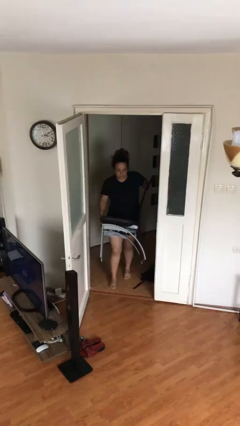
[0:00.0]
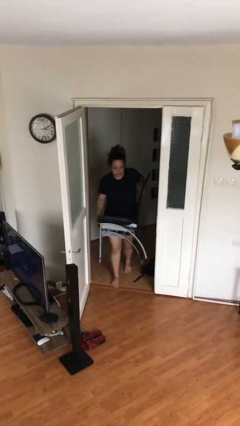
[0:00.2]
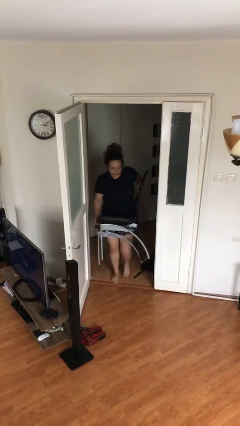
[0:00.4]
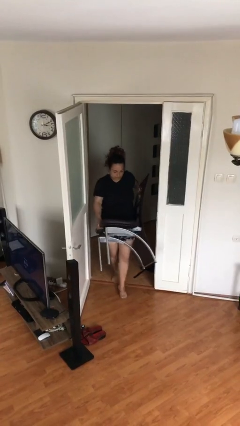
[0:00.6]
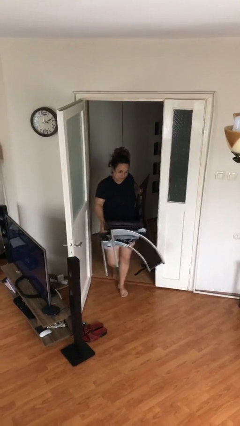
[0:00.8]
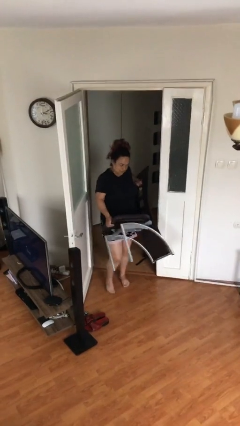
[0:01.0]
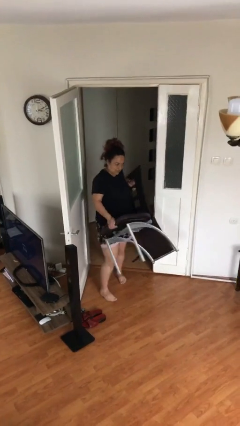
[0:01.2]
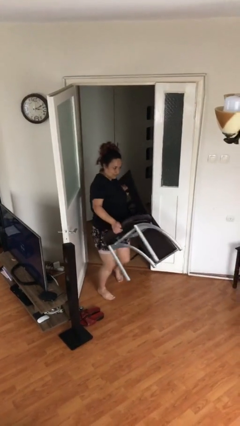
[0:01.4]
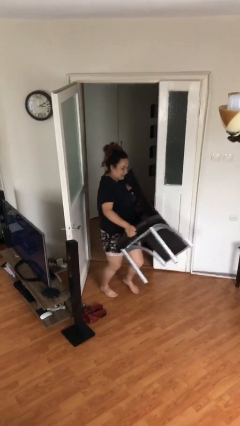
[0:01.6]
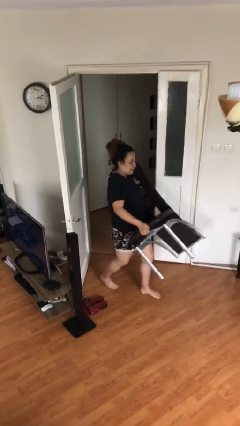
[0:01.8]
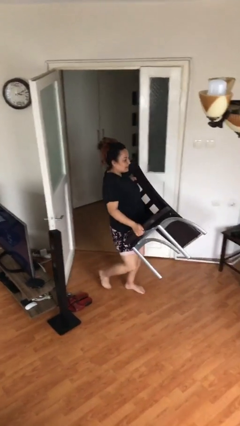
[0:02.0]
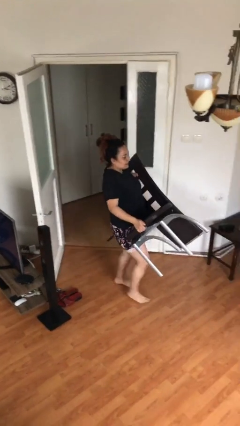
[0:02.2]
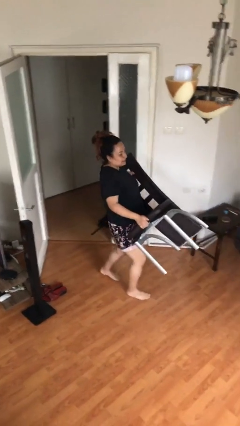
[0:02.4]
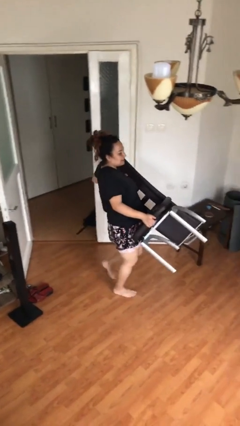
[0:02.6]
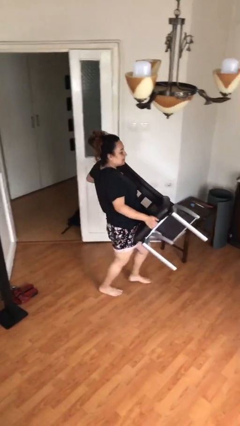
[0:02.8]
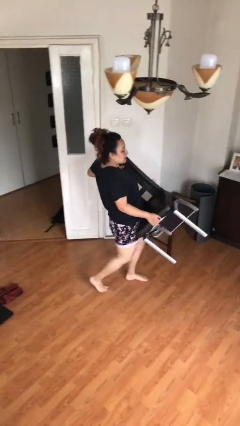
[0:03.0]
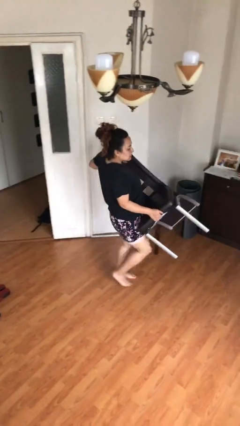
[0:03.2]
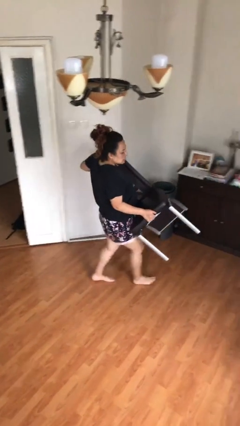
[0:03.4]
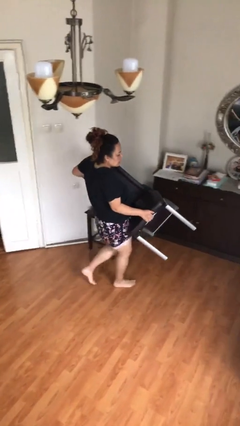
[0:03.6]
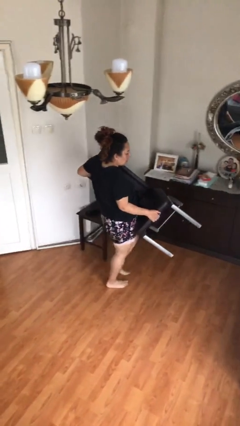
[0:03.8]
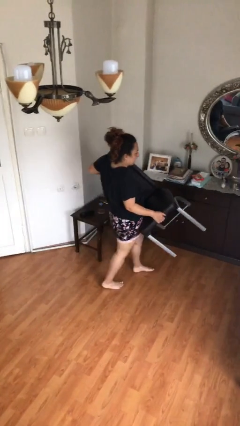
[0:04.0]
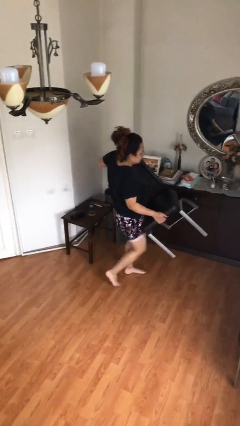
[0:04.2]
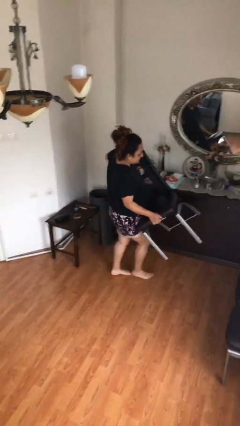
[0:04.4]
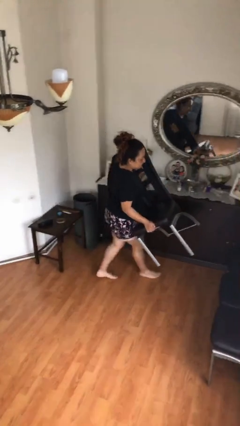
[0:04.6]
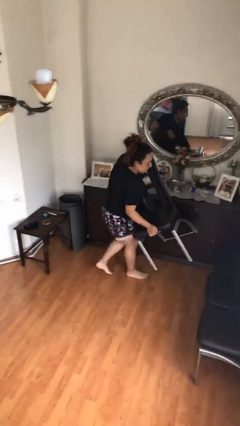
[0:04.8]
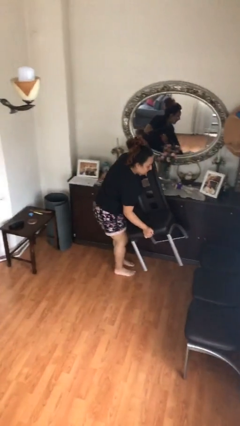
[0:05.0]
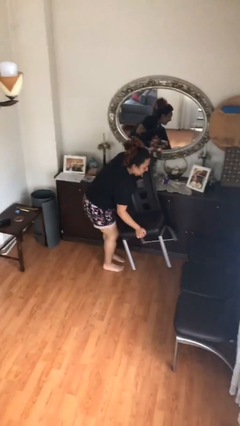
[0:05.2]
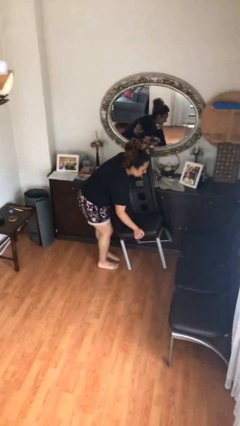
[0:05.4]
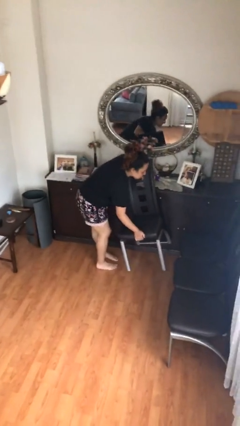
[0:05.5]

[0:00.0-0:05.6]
person carries heavy object

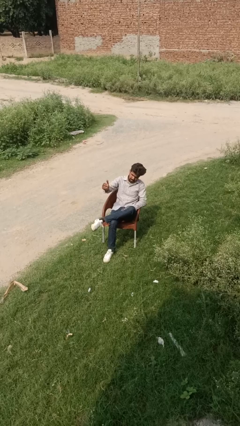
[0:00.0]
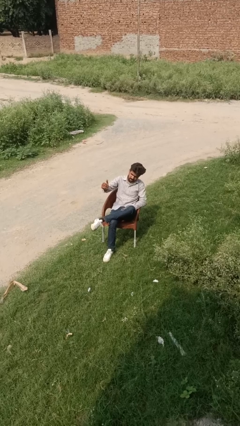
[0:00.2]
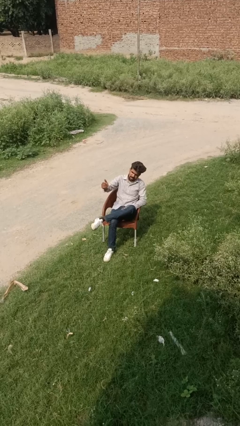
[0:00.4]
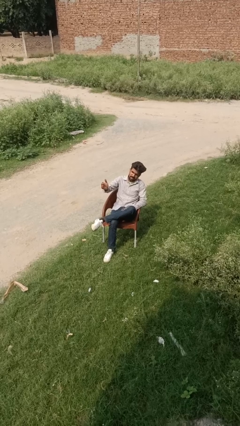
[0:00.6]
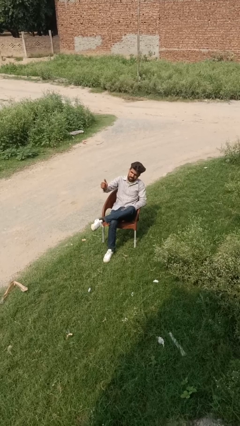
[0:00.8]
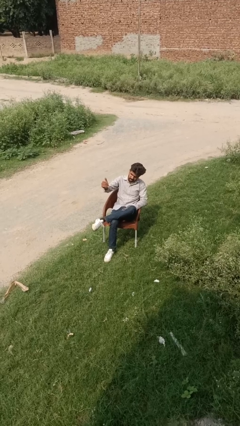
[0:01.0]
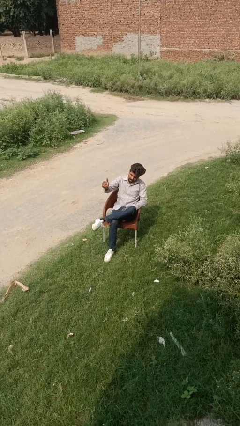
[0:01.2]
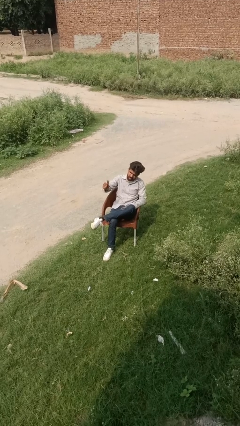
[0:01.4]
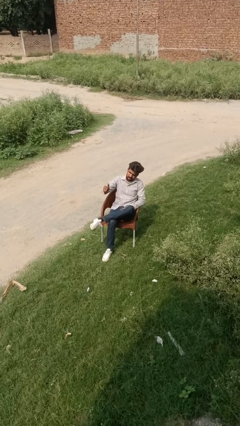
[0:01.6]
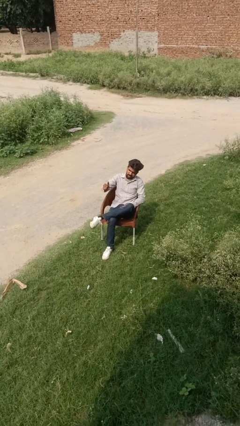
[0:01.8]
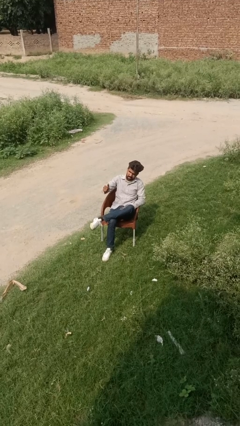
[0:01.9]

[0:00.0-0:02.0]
person gestures come here

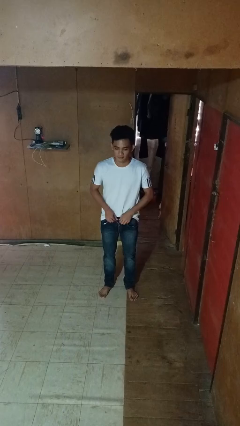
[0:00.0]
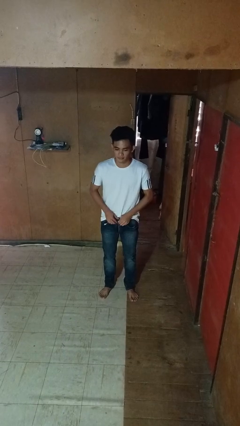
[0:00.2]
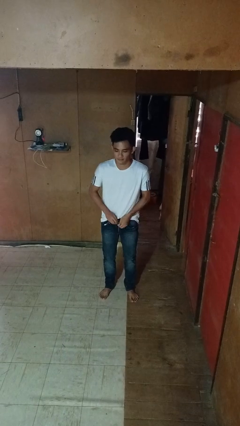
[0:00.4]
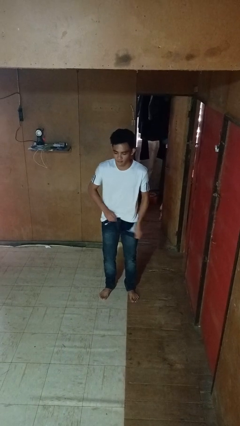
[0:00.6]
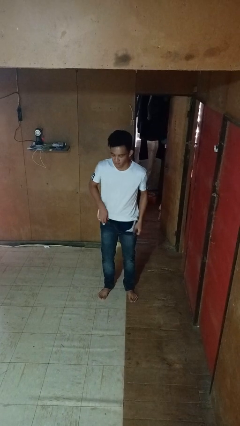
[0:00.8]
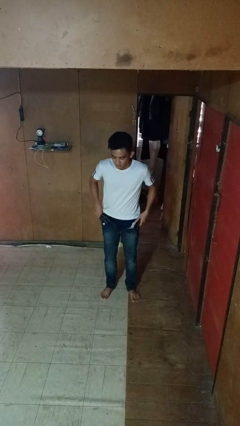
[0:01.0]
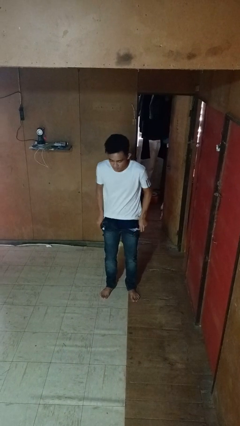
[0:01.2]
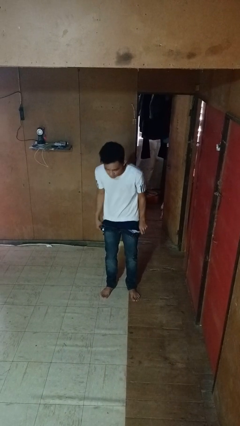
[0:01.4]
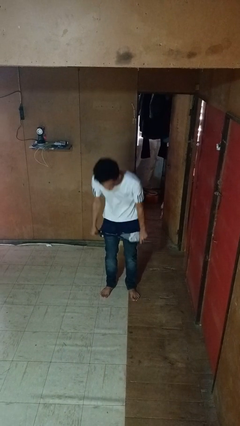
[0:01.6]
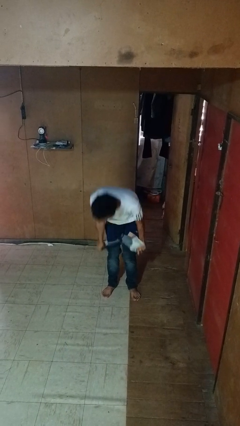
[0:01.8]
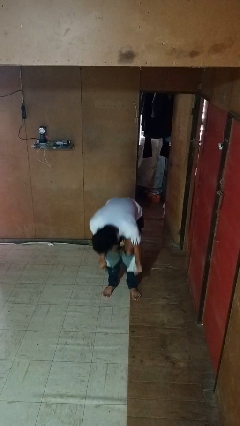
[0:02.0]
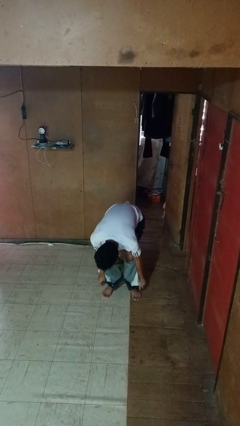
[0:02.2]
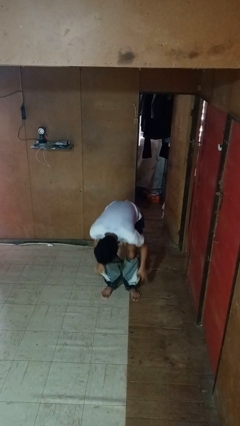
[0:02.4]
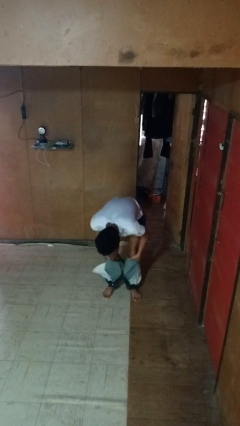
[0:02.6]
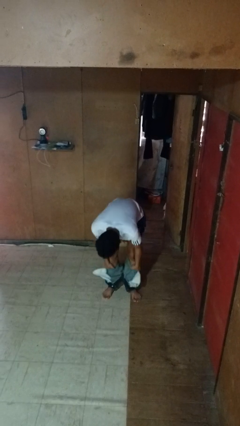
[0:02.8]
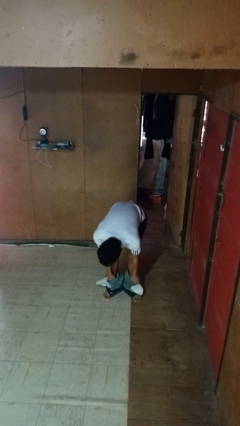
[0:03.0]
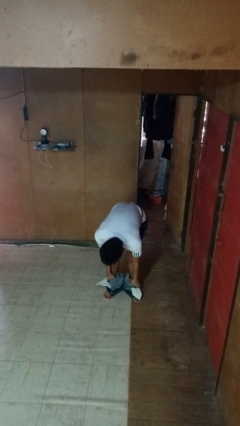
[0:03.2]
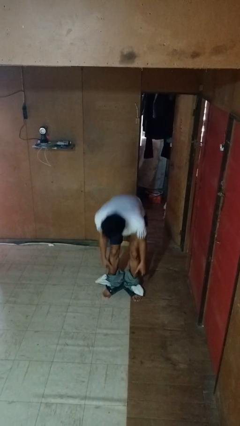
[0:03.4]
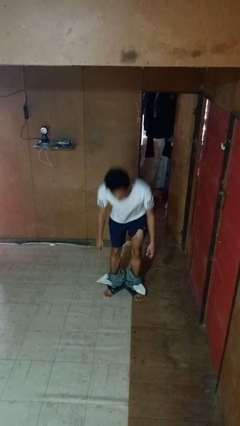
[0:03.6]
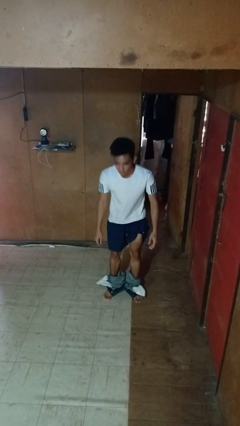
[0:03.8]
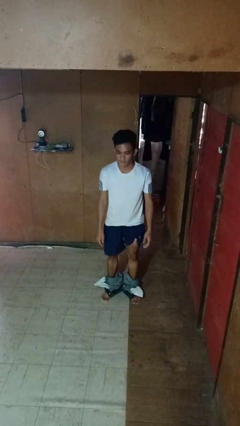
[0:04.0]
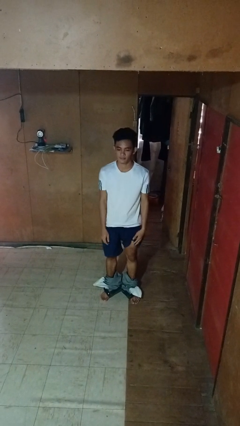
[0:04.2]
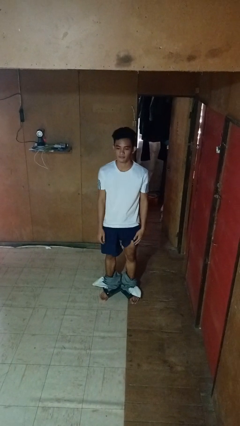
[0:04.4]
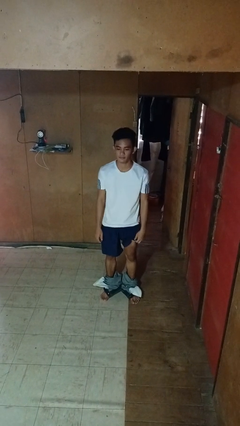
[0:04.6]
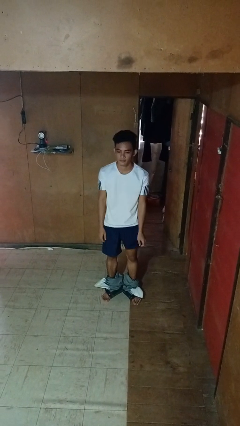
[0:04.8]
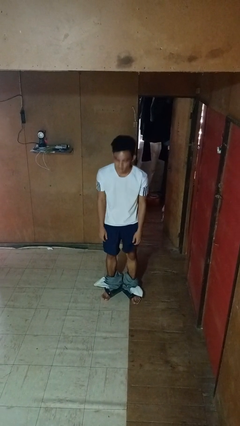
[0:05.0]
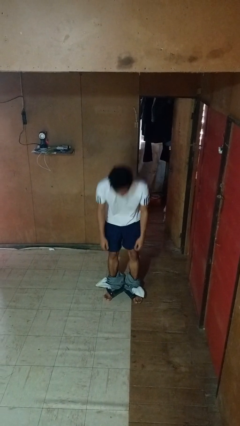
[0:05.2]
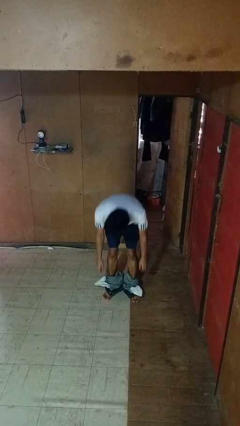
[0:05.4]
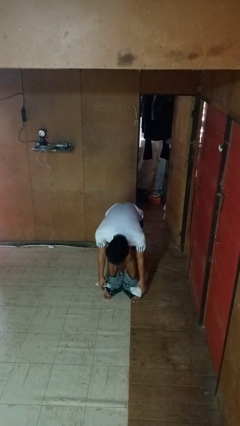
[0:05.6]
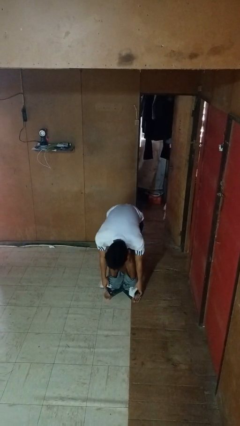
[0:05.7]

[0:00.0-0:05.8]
person takes off pants

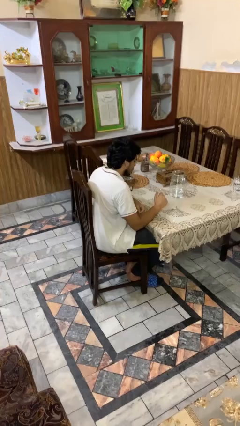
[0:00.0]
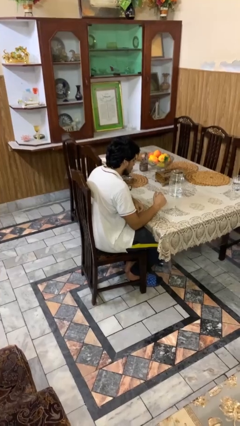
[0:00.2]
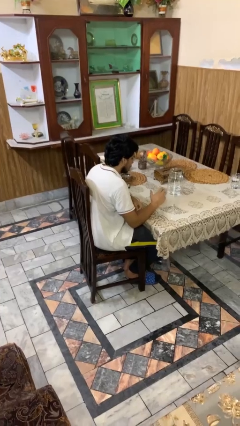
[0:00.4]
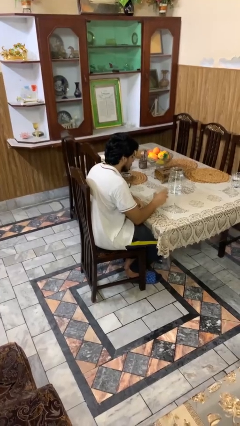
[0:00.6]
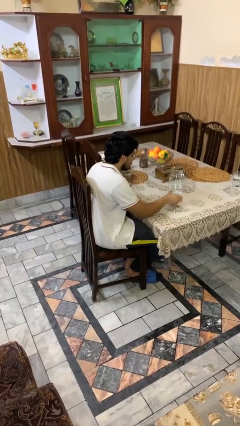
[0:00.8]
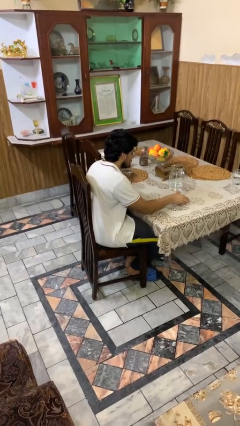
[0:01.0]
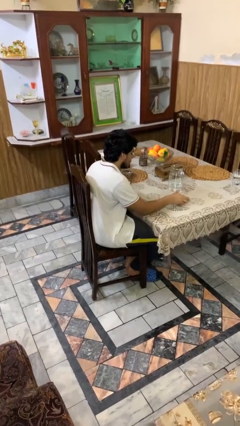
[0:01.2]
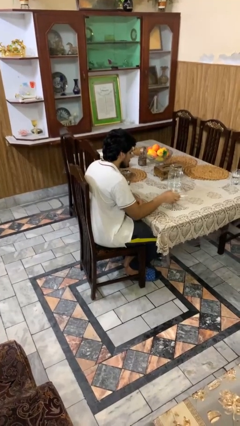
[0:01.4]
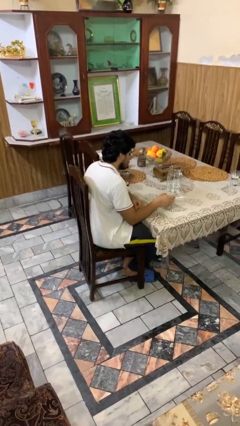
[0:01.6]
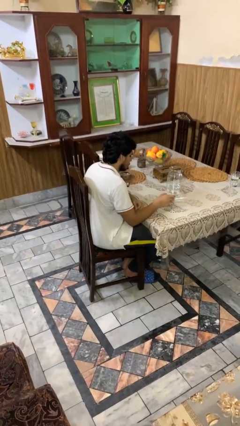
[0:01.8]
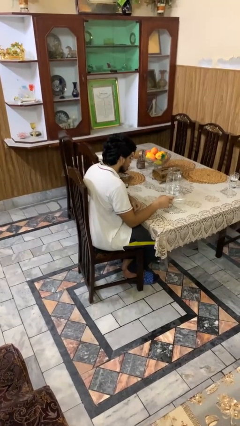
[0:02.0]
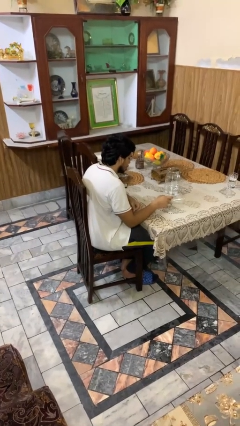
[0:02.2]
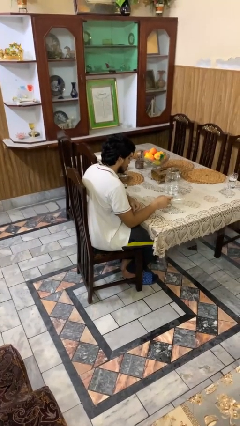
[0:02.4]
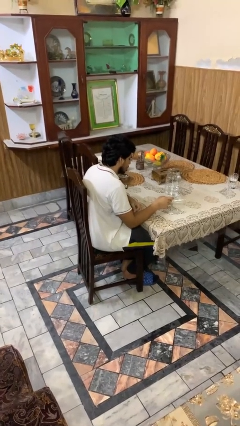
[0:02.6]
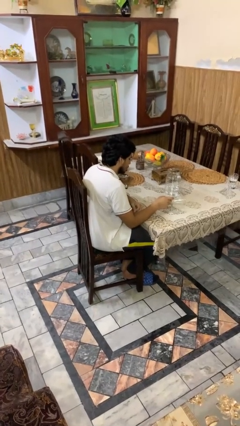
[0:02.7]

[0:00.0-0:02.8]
person knocks over glass

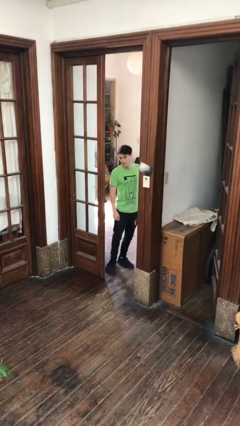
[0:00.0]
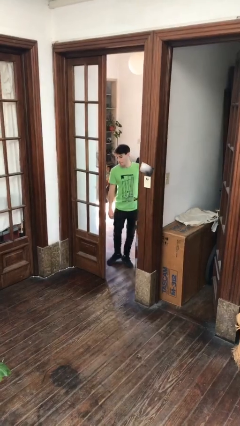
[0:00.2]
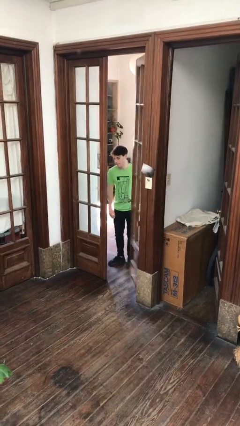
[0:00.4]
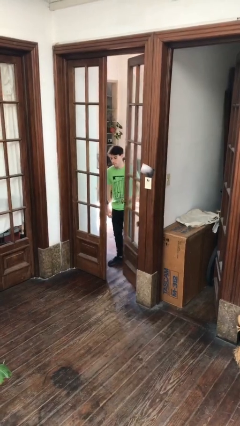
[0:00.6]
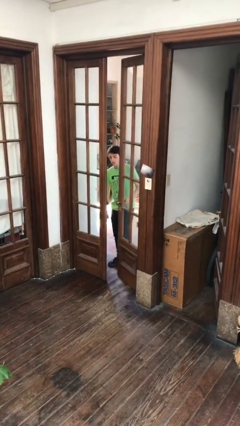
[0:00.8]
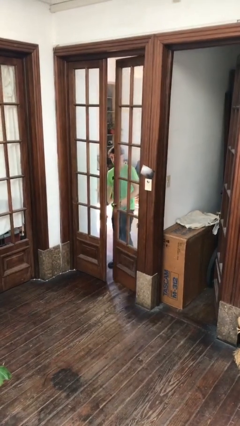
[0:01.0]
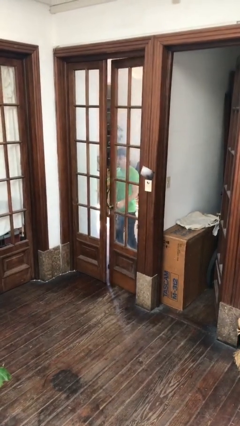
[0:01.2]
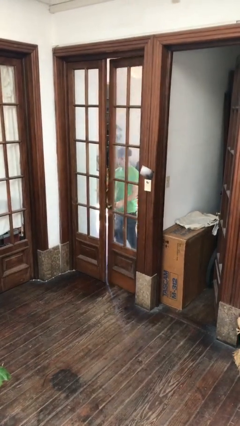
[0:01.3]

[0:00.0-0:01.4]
person closes facility door
